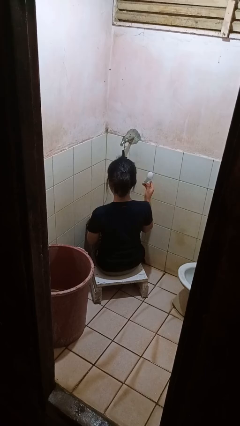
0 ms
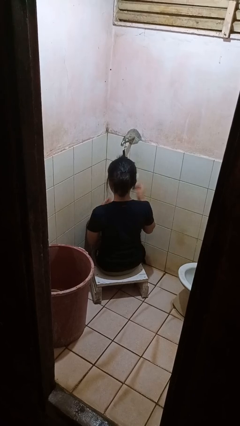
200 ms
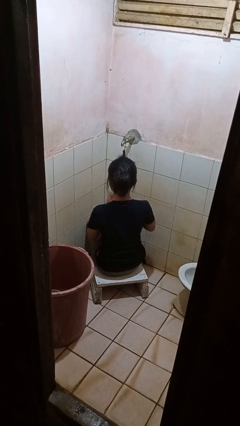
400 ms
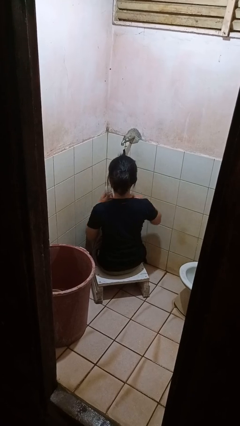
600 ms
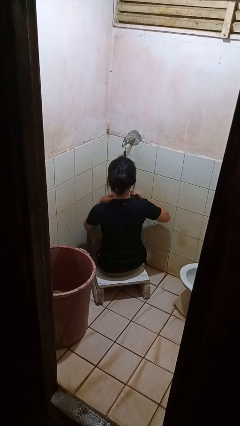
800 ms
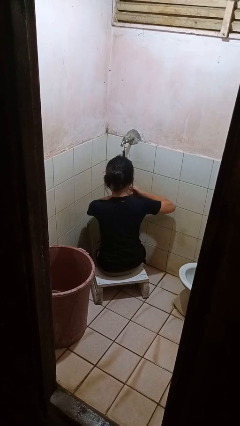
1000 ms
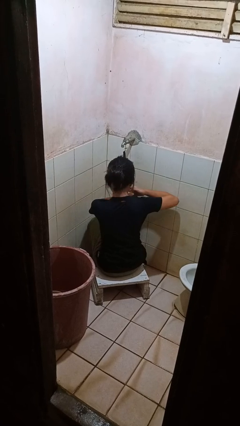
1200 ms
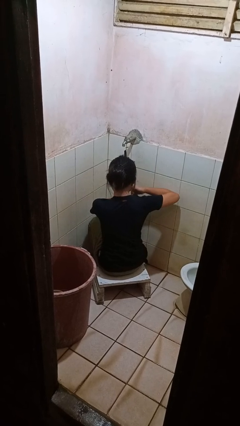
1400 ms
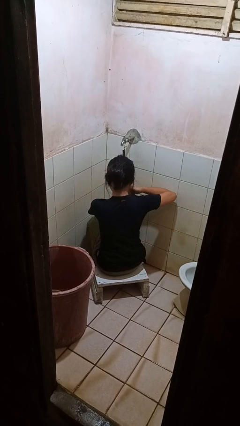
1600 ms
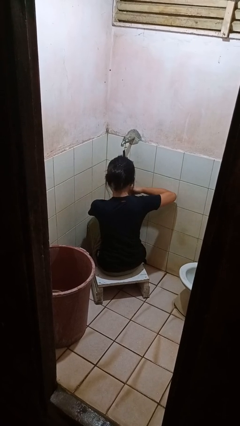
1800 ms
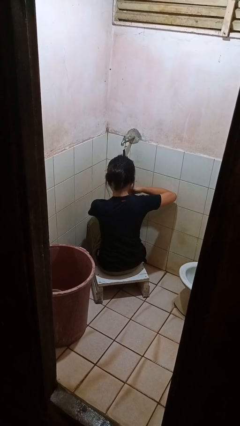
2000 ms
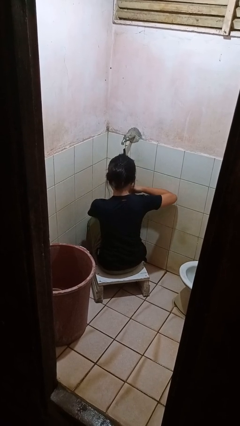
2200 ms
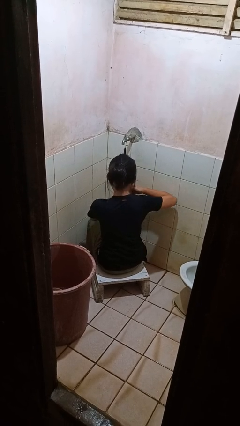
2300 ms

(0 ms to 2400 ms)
person applies deodorant

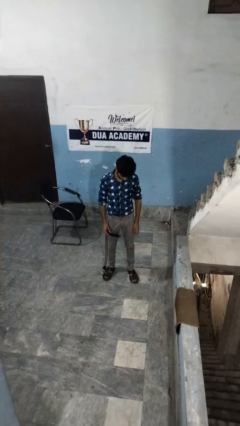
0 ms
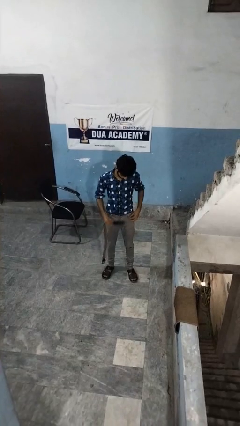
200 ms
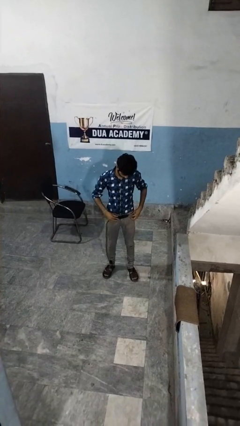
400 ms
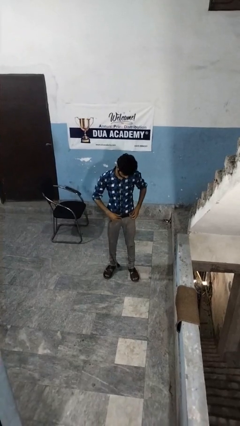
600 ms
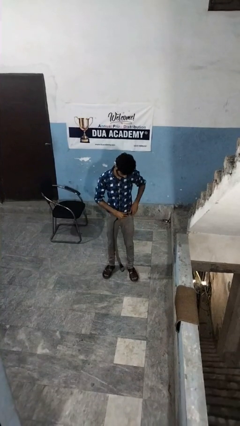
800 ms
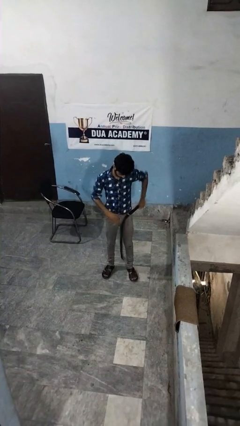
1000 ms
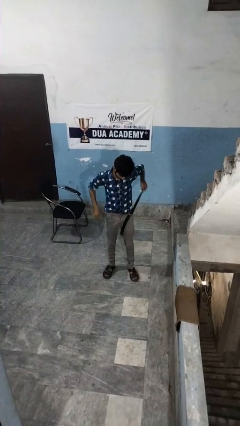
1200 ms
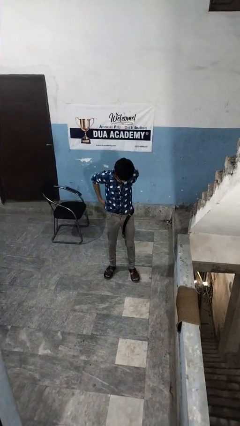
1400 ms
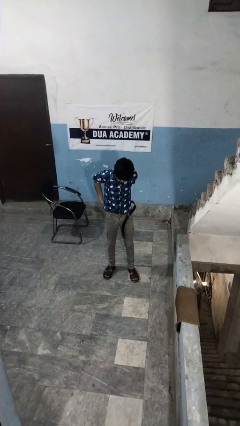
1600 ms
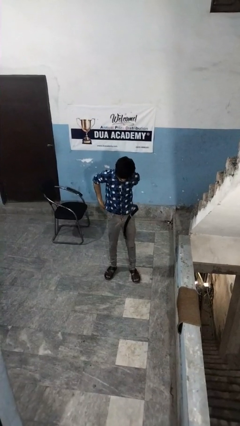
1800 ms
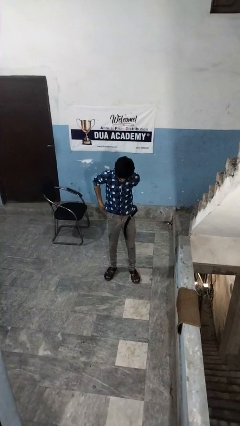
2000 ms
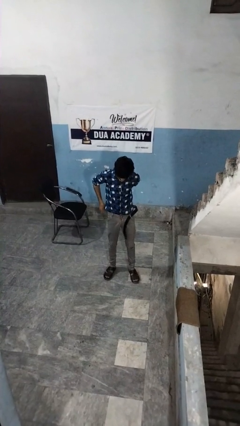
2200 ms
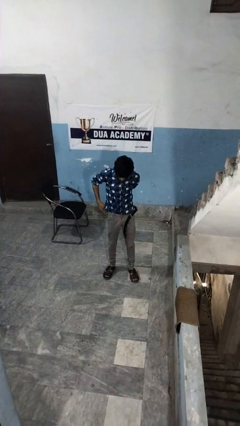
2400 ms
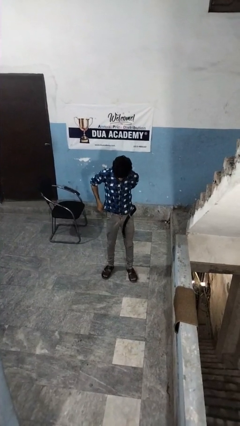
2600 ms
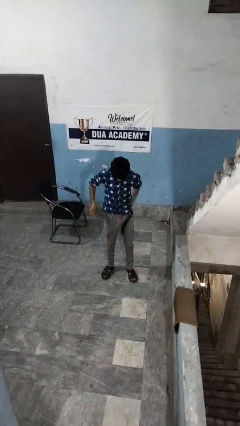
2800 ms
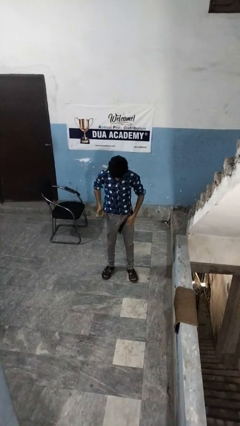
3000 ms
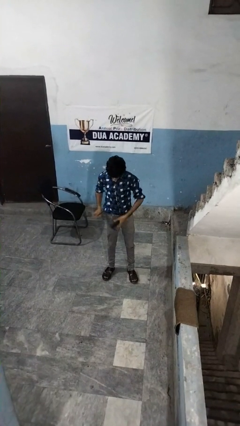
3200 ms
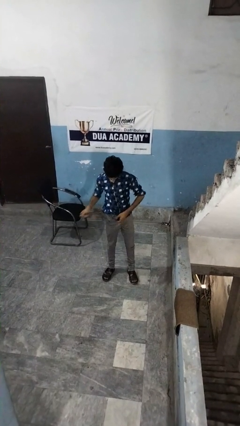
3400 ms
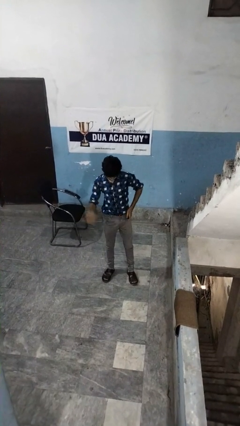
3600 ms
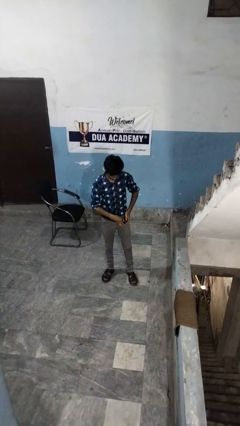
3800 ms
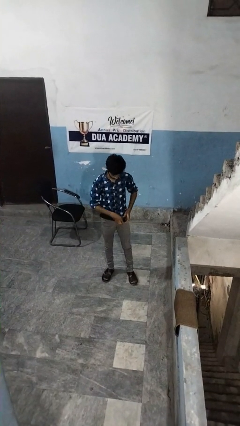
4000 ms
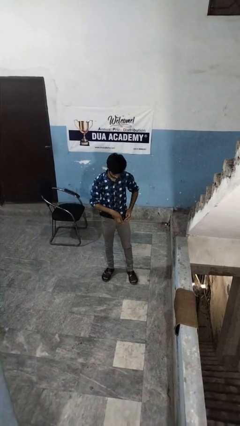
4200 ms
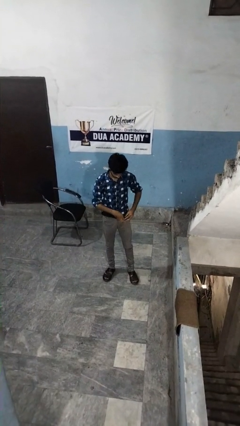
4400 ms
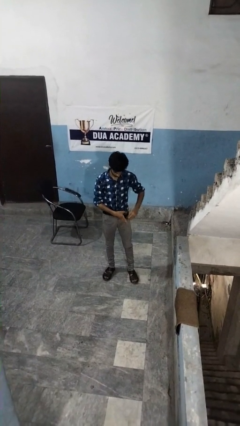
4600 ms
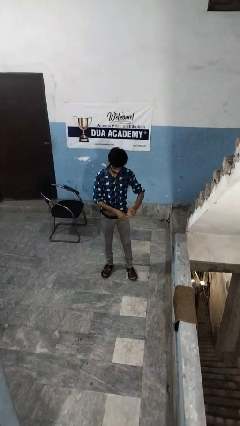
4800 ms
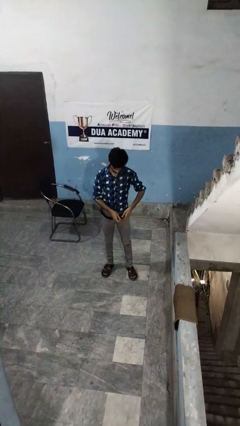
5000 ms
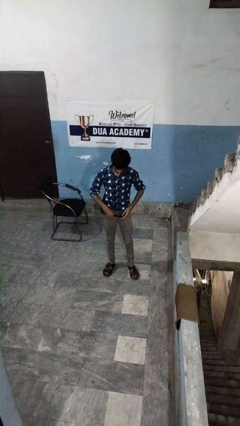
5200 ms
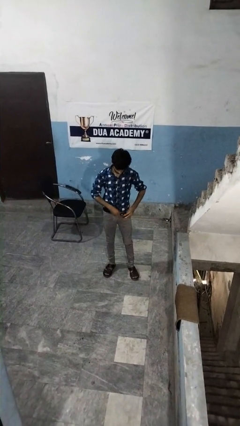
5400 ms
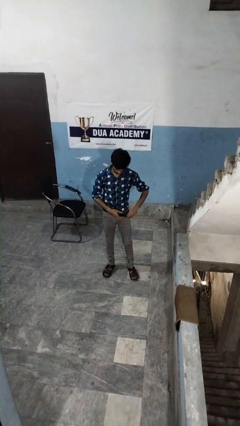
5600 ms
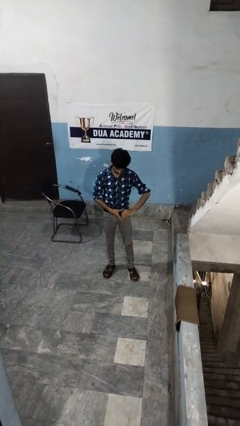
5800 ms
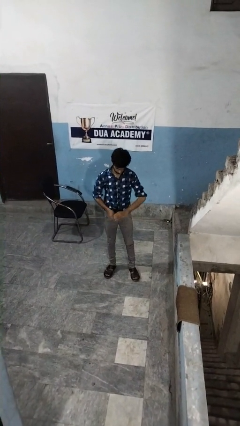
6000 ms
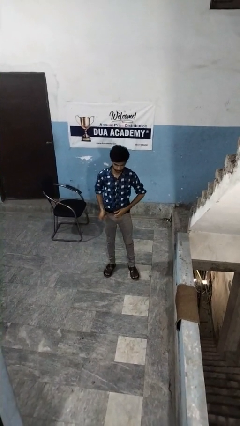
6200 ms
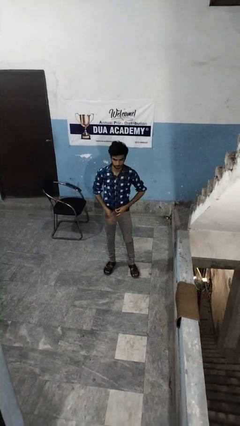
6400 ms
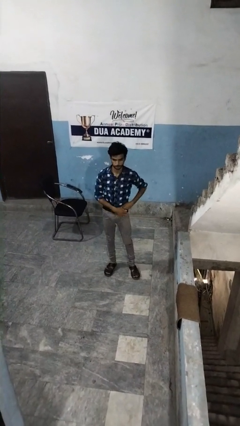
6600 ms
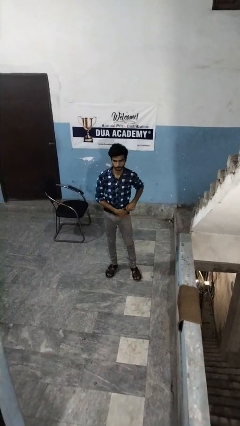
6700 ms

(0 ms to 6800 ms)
person puts on belt

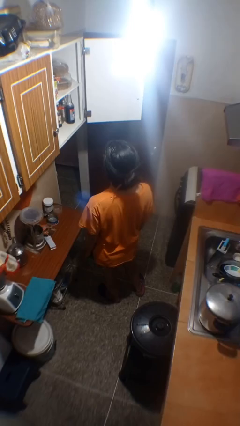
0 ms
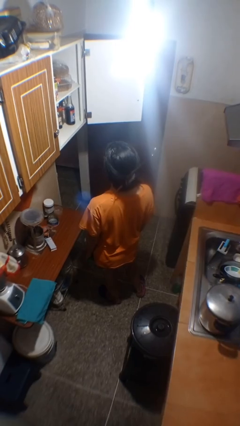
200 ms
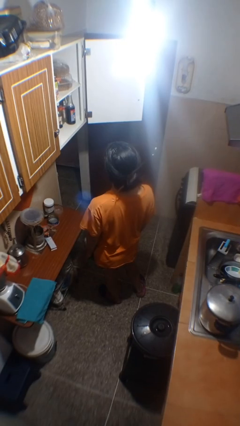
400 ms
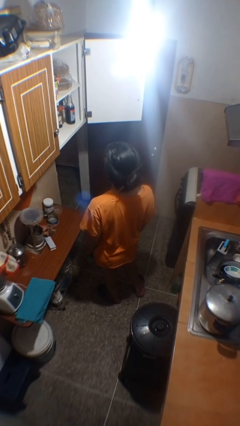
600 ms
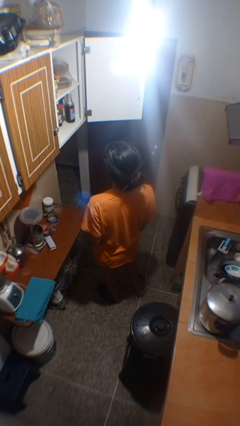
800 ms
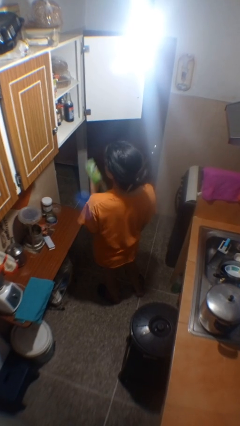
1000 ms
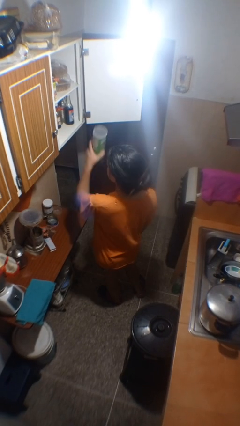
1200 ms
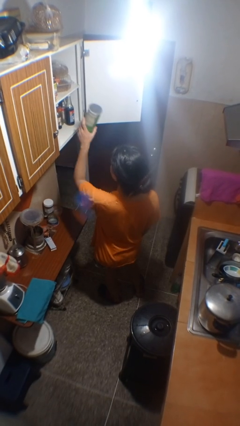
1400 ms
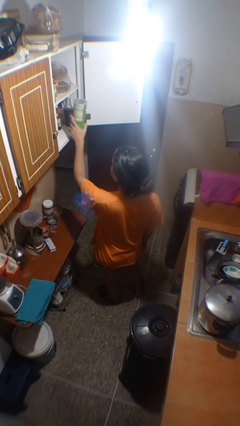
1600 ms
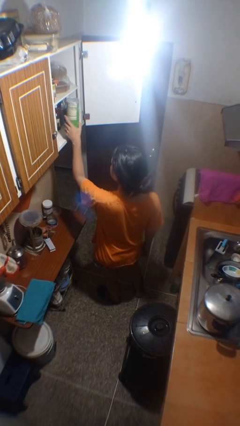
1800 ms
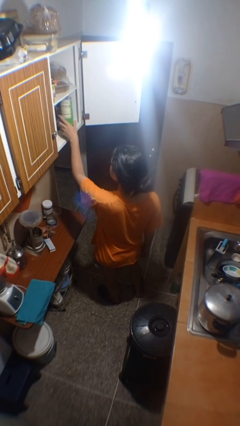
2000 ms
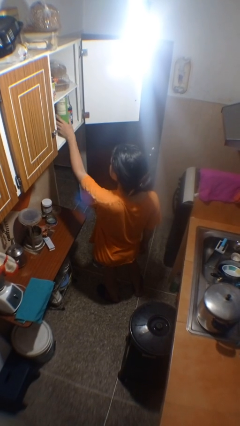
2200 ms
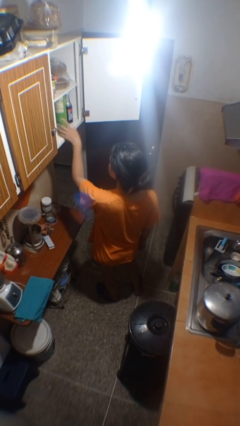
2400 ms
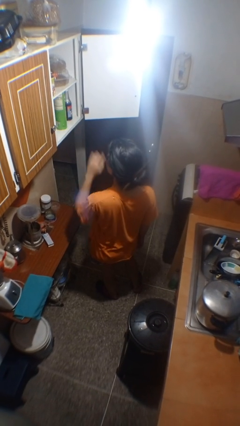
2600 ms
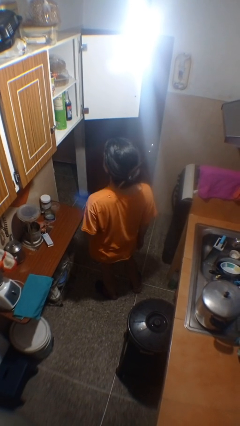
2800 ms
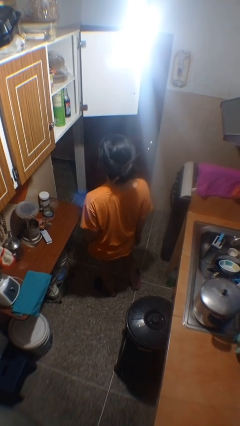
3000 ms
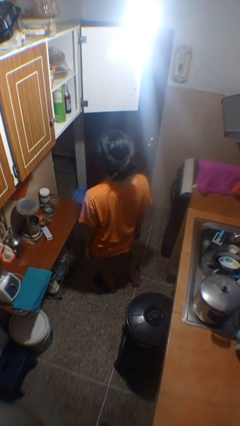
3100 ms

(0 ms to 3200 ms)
person puts object in cabinet

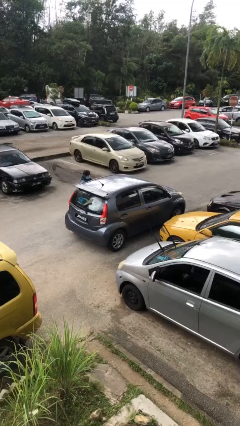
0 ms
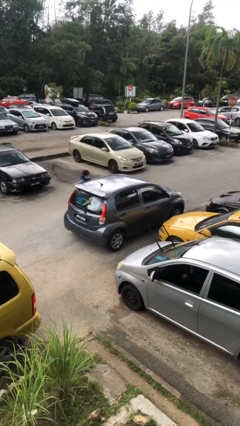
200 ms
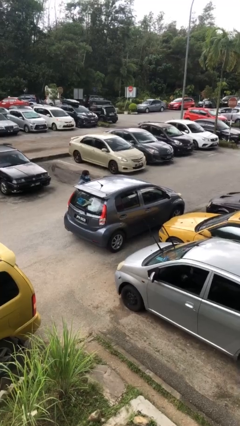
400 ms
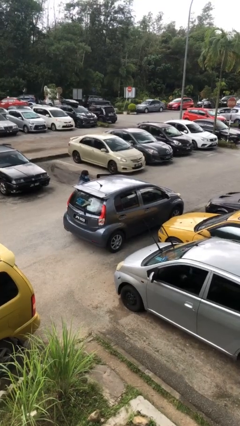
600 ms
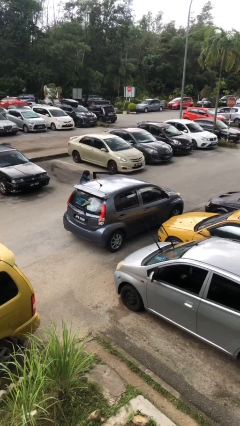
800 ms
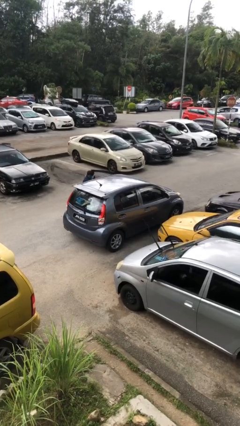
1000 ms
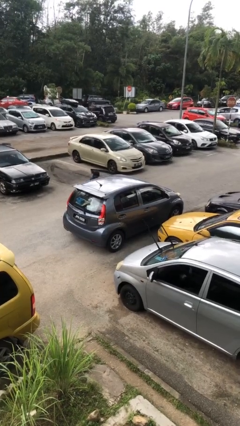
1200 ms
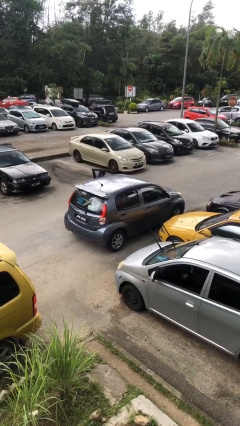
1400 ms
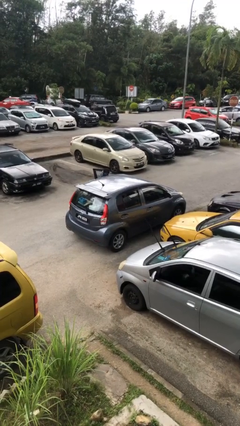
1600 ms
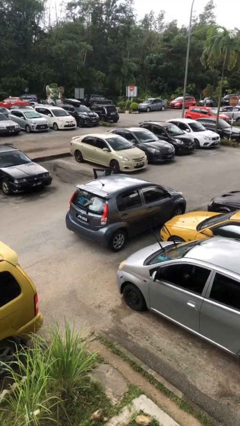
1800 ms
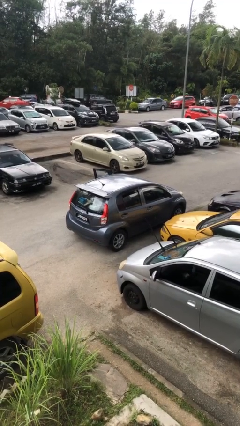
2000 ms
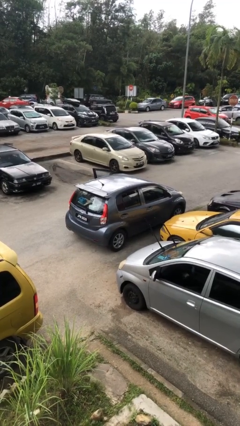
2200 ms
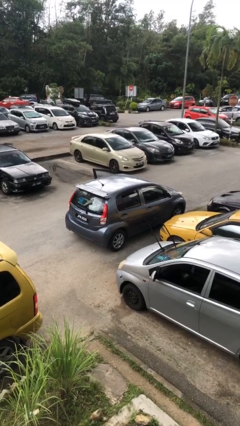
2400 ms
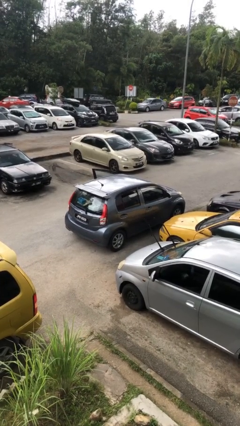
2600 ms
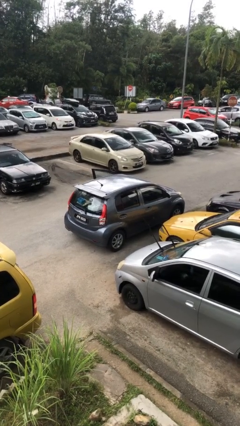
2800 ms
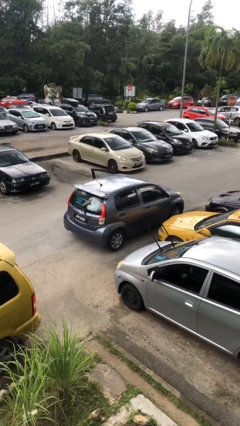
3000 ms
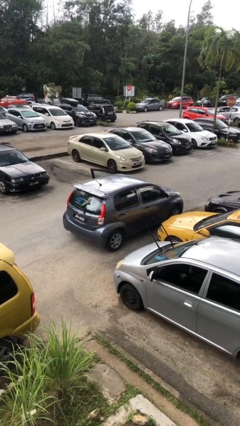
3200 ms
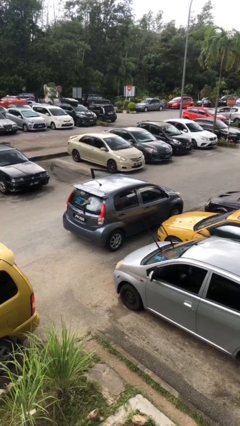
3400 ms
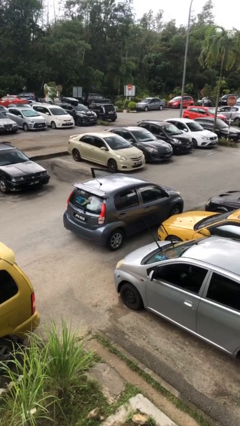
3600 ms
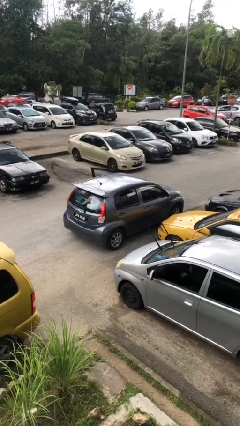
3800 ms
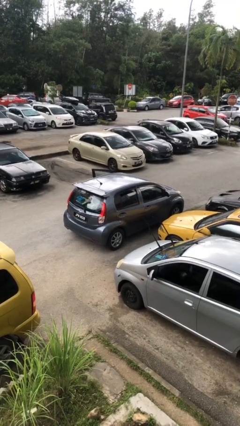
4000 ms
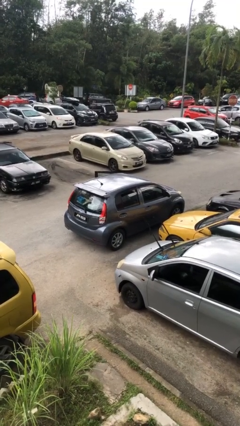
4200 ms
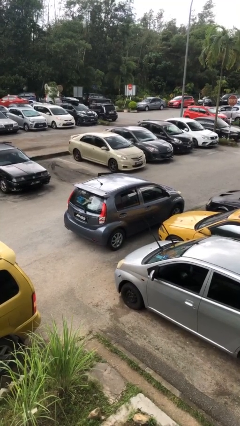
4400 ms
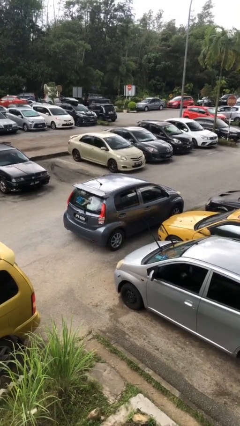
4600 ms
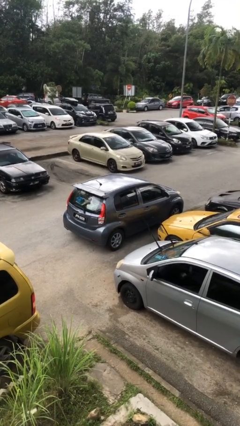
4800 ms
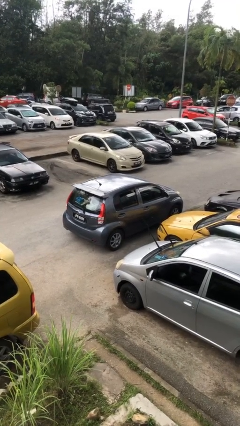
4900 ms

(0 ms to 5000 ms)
car picks up person

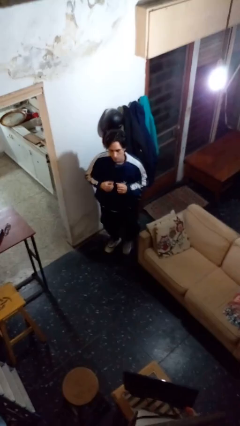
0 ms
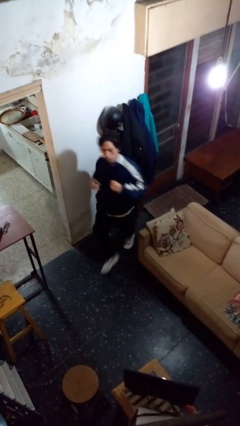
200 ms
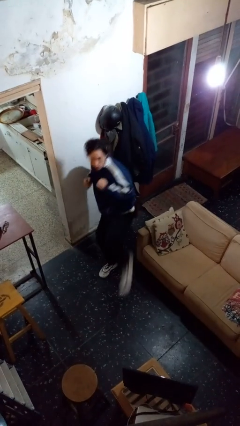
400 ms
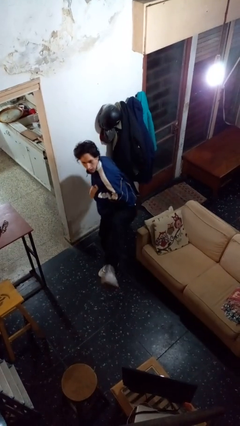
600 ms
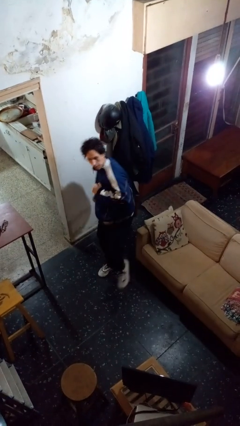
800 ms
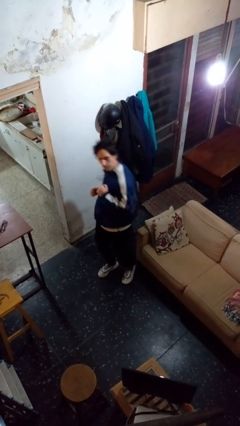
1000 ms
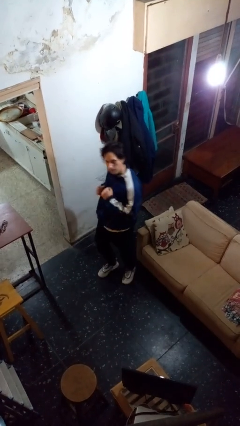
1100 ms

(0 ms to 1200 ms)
person karate kicks
